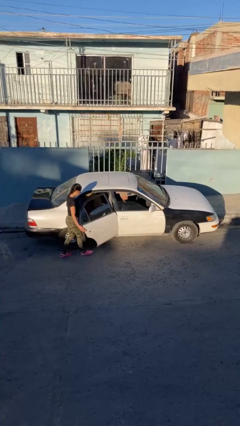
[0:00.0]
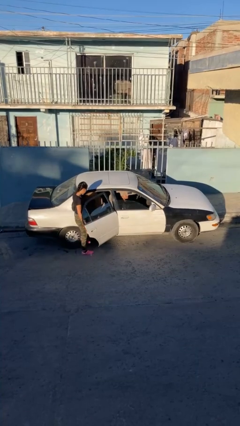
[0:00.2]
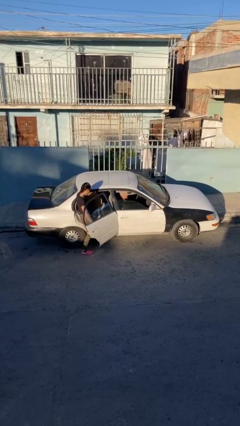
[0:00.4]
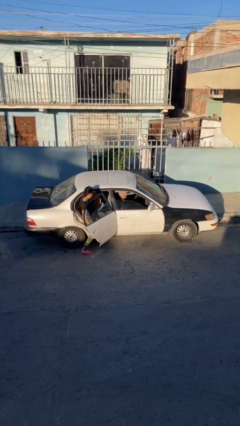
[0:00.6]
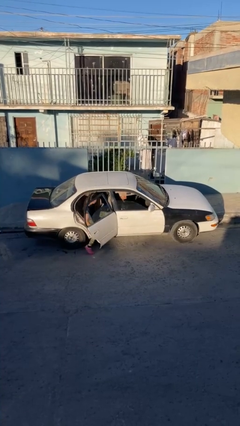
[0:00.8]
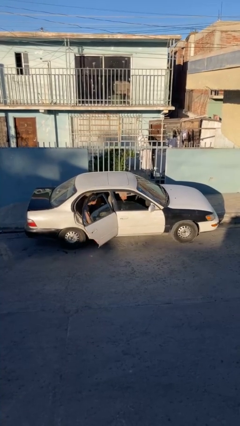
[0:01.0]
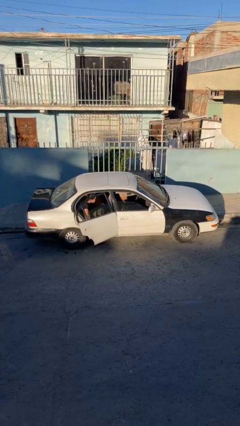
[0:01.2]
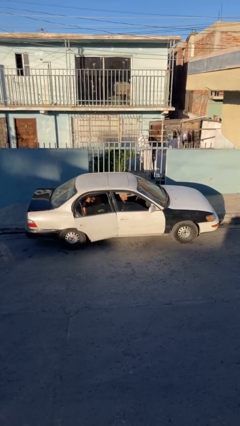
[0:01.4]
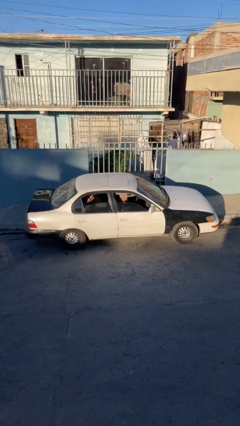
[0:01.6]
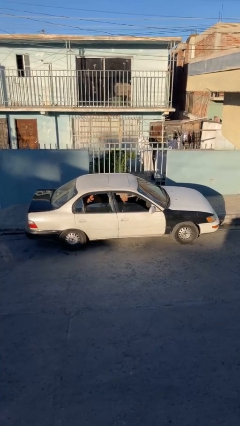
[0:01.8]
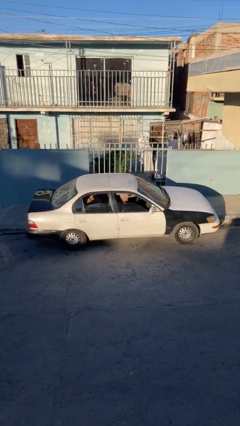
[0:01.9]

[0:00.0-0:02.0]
car picks up person

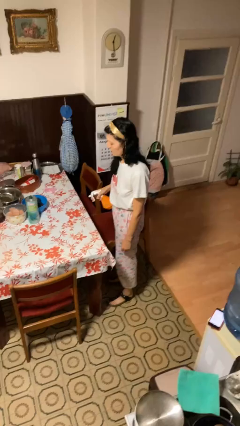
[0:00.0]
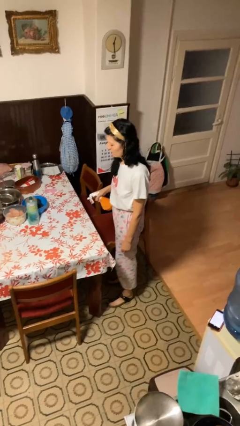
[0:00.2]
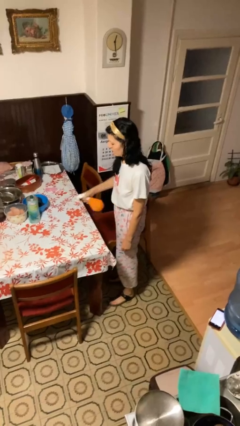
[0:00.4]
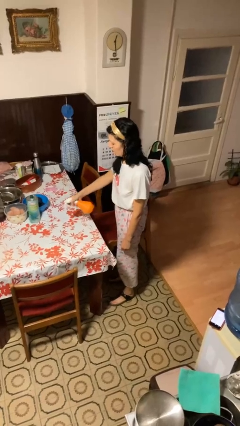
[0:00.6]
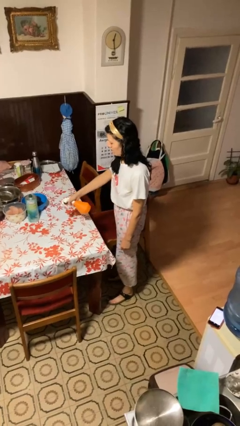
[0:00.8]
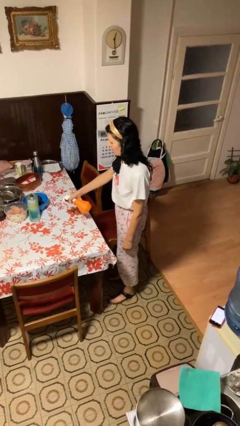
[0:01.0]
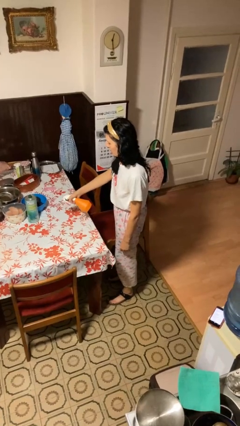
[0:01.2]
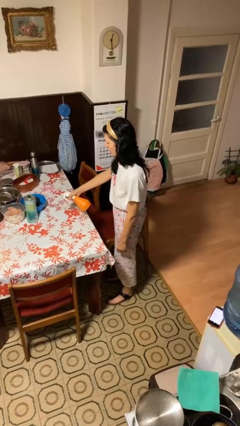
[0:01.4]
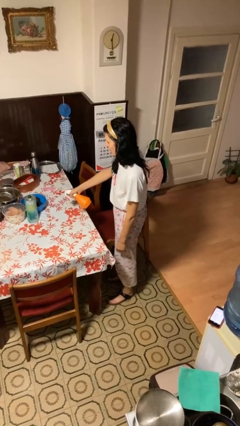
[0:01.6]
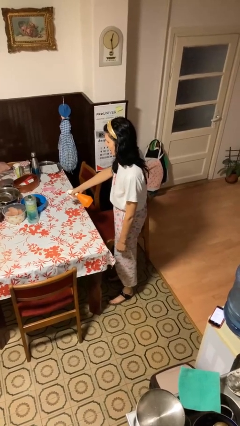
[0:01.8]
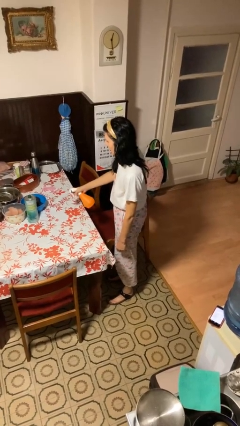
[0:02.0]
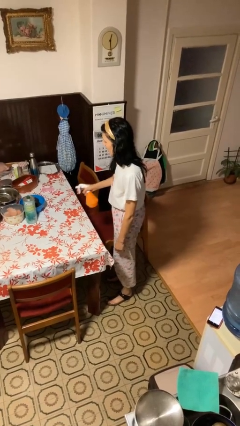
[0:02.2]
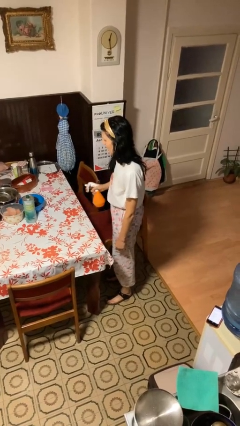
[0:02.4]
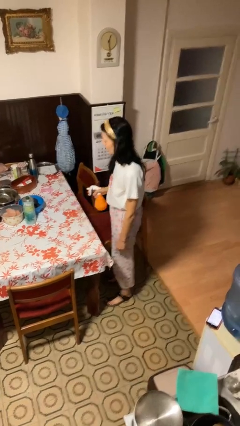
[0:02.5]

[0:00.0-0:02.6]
person sprays from bottle

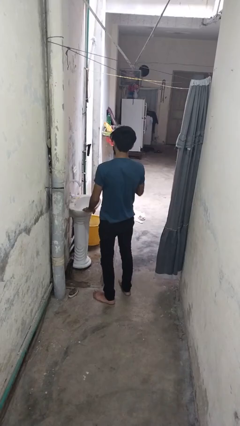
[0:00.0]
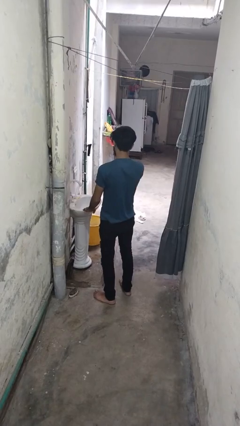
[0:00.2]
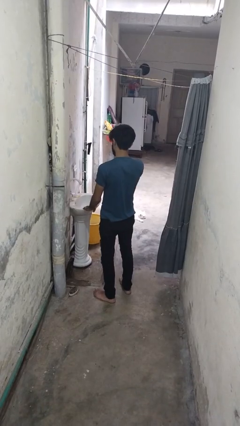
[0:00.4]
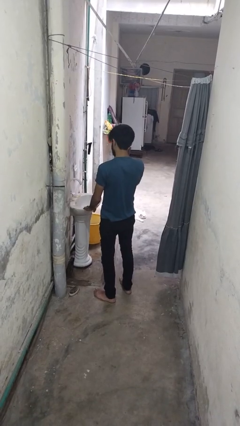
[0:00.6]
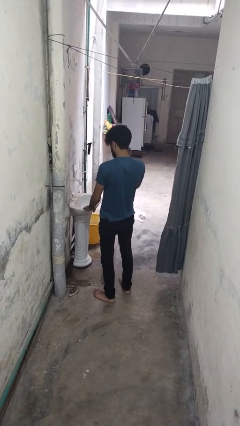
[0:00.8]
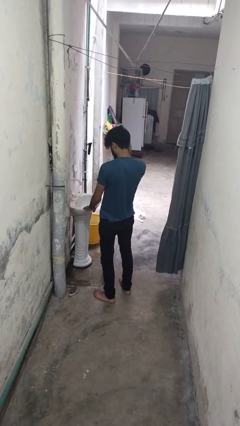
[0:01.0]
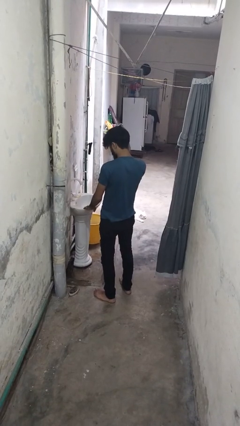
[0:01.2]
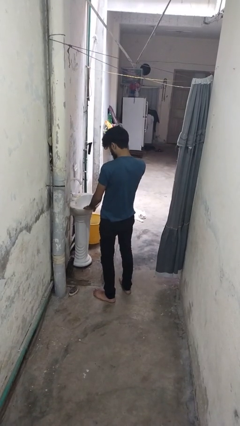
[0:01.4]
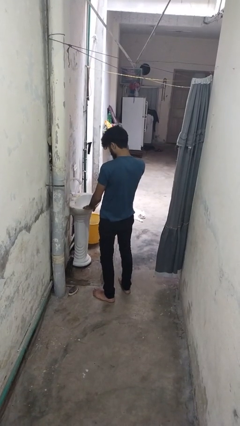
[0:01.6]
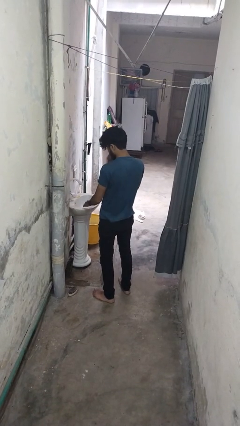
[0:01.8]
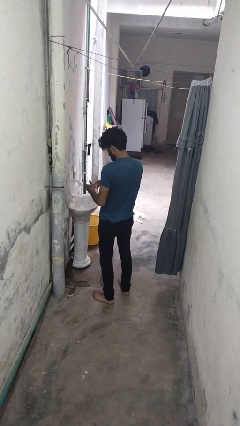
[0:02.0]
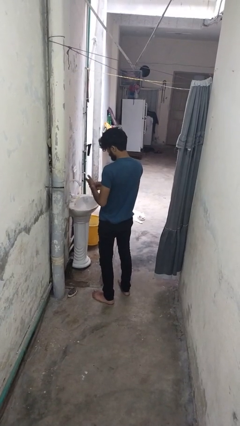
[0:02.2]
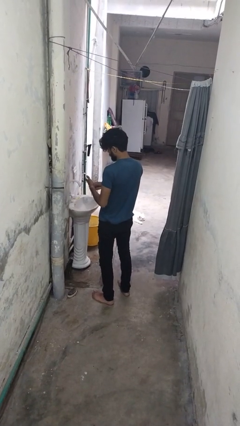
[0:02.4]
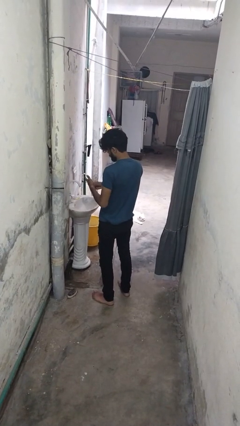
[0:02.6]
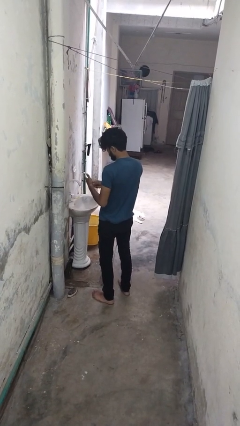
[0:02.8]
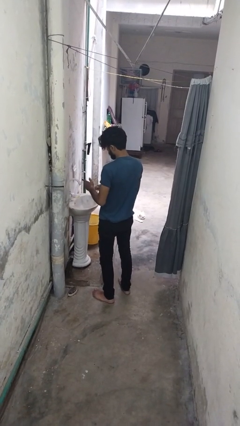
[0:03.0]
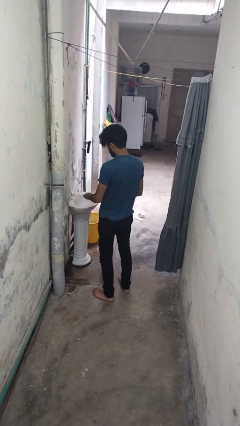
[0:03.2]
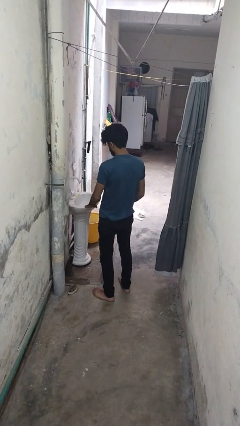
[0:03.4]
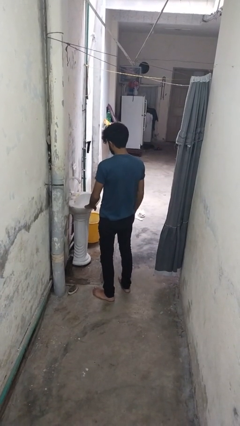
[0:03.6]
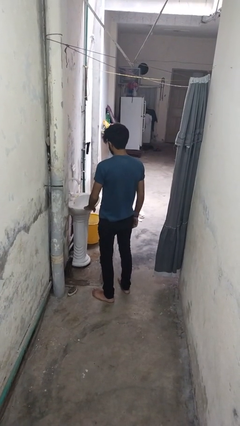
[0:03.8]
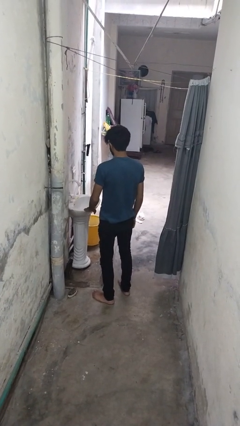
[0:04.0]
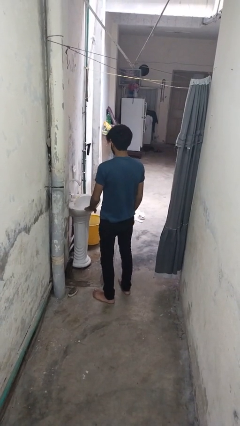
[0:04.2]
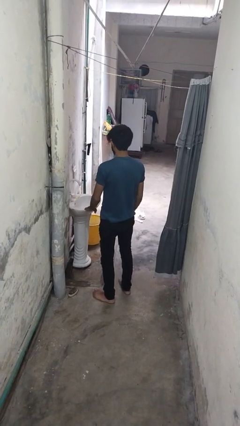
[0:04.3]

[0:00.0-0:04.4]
person takes off ring

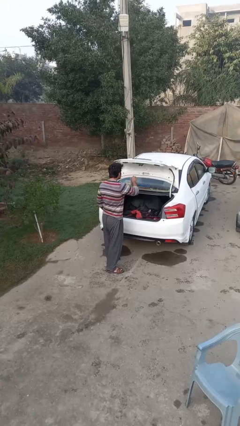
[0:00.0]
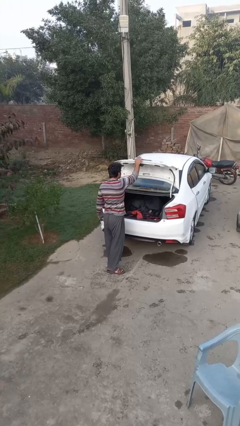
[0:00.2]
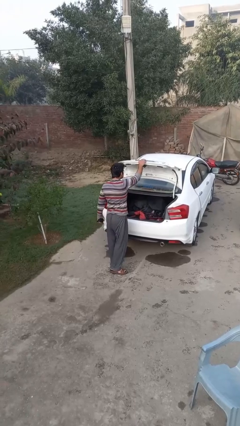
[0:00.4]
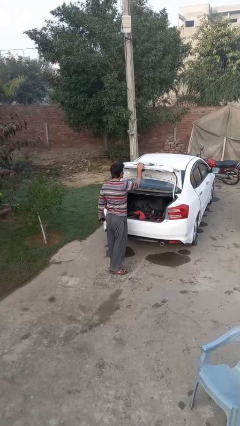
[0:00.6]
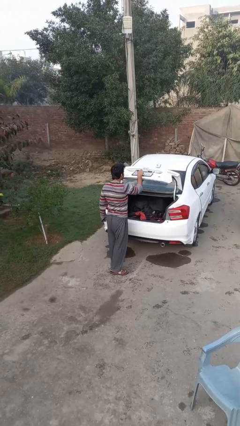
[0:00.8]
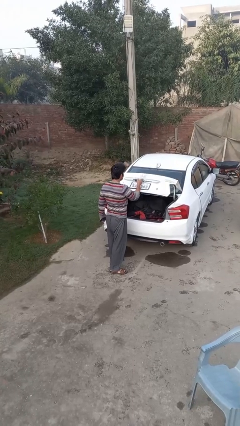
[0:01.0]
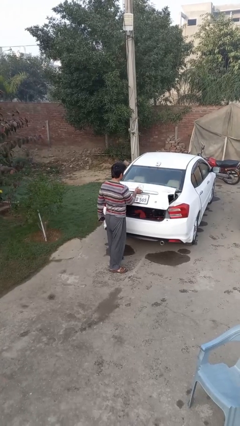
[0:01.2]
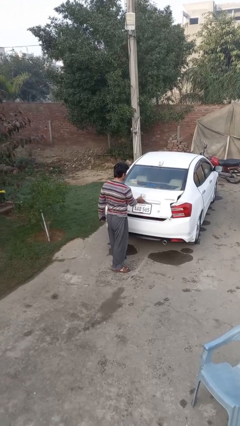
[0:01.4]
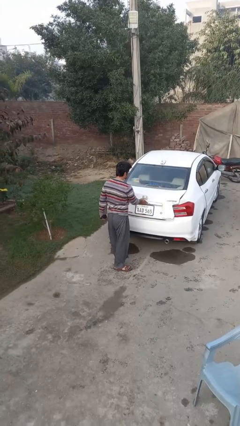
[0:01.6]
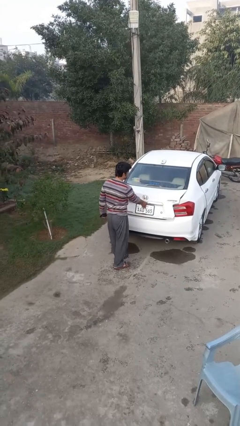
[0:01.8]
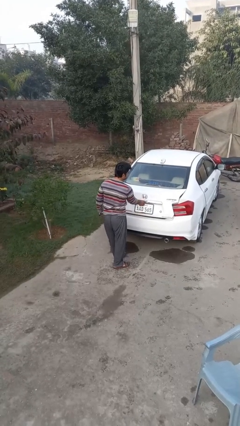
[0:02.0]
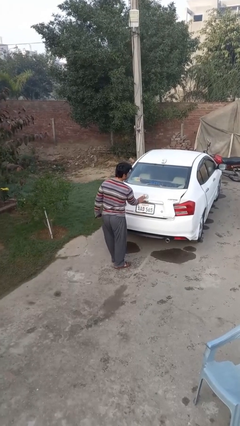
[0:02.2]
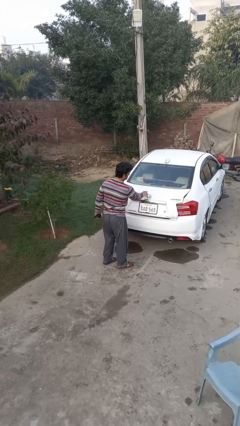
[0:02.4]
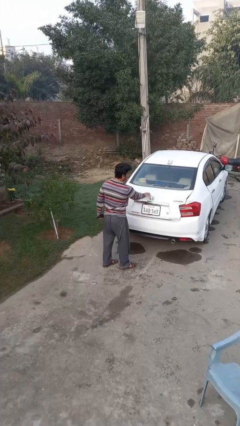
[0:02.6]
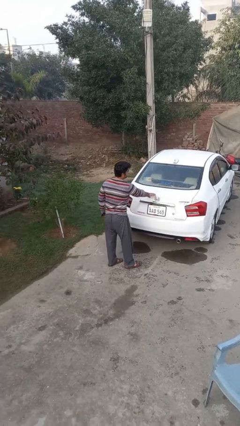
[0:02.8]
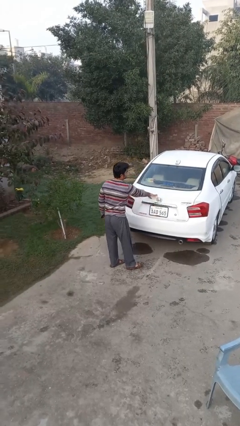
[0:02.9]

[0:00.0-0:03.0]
person closes car trunk

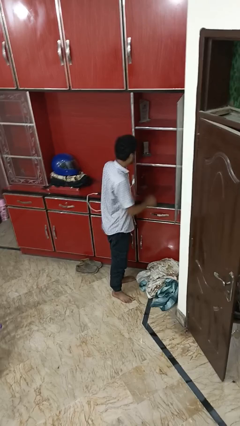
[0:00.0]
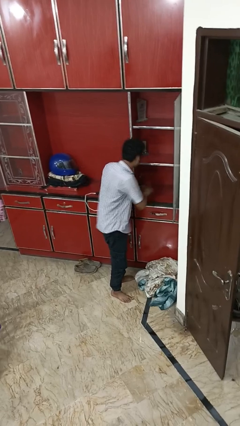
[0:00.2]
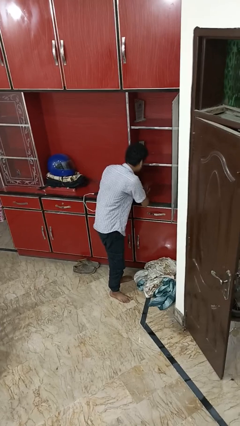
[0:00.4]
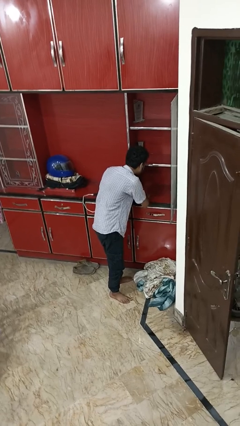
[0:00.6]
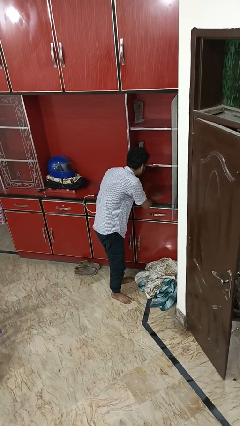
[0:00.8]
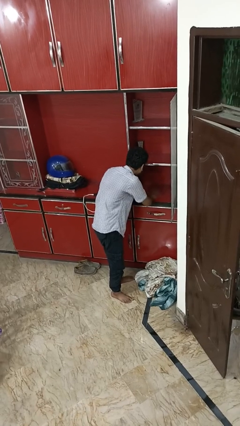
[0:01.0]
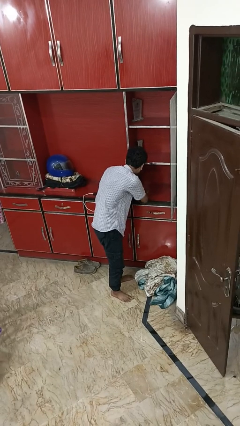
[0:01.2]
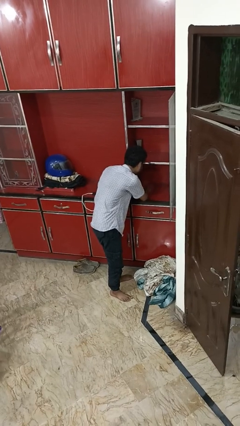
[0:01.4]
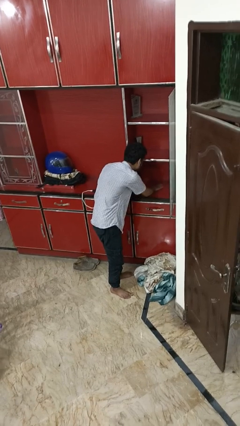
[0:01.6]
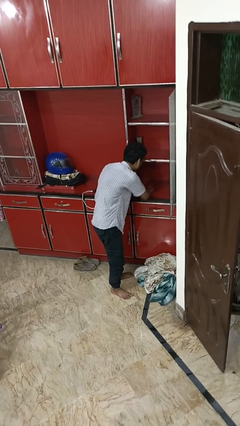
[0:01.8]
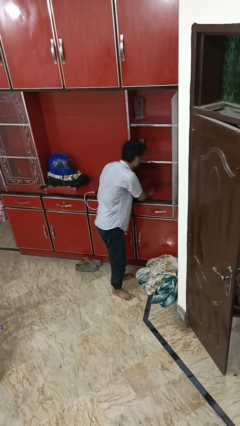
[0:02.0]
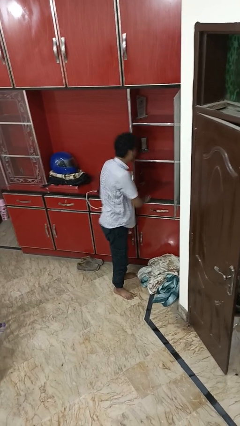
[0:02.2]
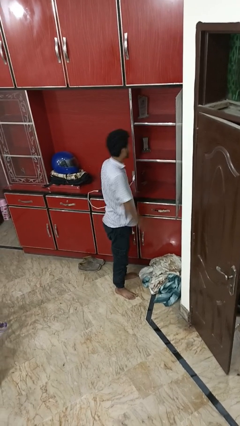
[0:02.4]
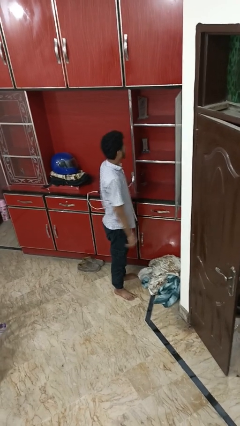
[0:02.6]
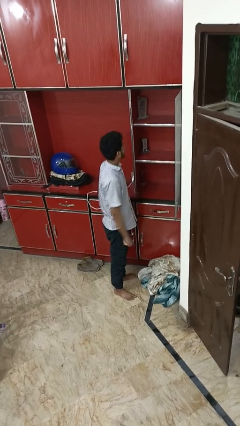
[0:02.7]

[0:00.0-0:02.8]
person searches in cabinet

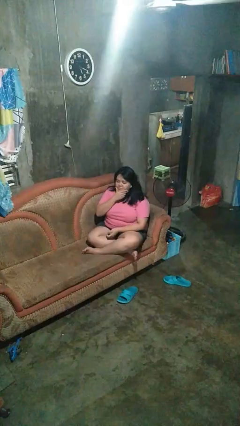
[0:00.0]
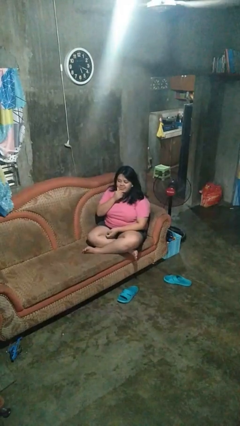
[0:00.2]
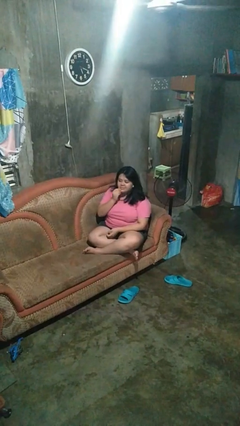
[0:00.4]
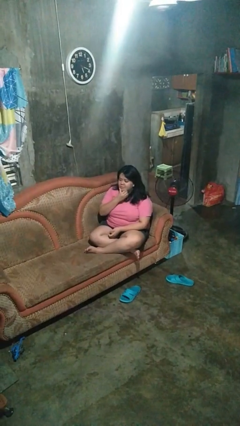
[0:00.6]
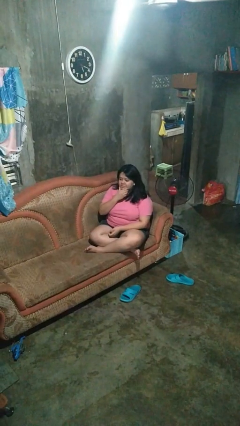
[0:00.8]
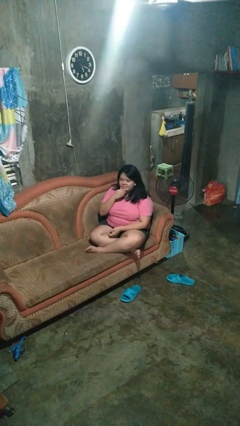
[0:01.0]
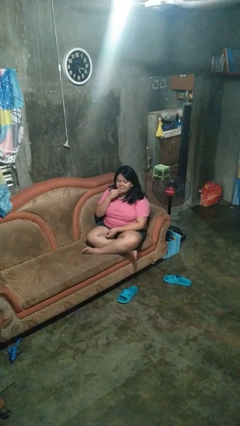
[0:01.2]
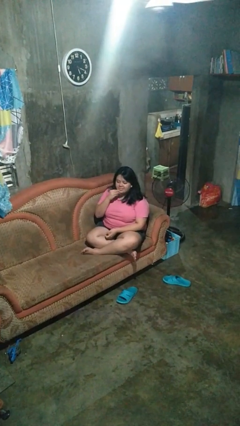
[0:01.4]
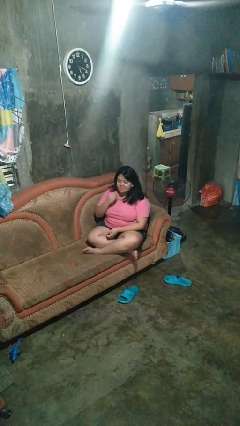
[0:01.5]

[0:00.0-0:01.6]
person strokes chin

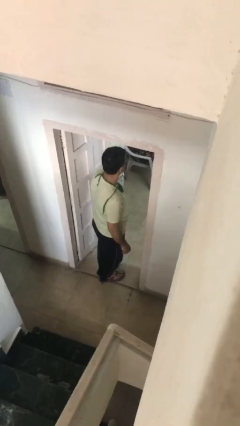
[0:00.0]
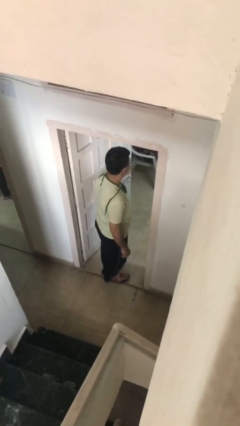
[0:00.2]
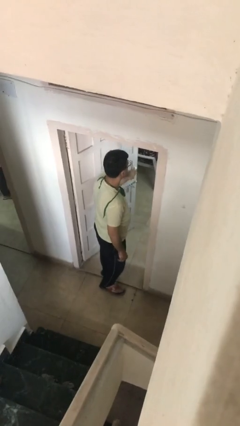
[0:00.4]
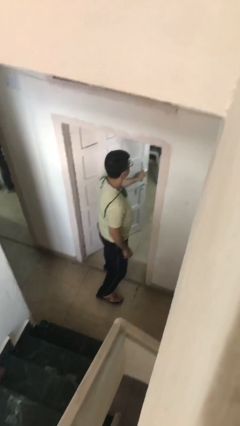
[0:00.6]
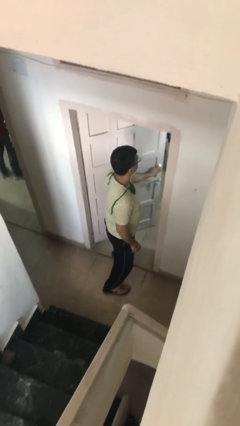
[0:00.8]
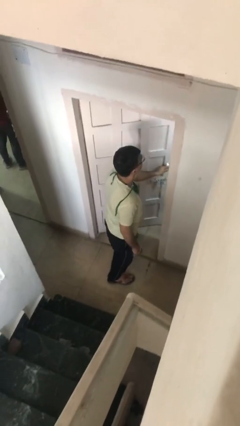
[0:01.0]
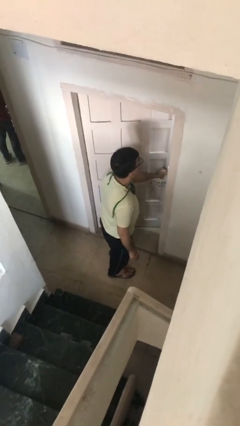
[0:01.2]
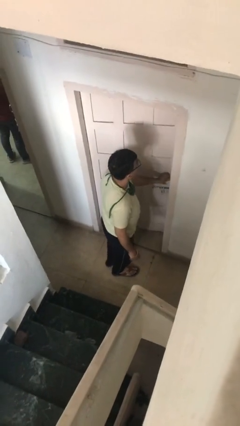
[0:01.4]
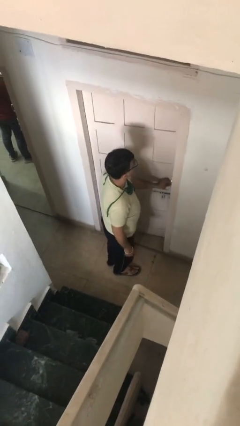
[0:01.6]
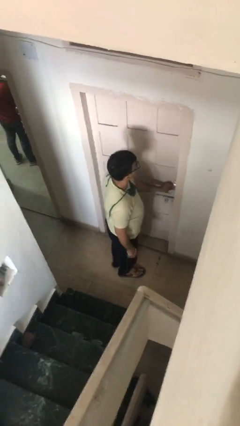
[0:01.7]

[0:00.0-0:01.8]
person closes facility door
